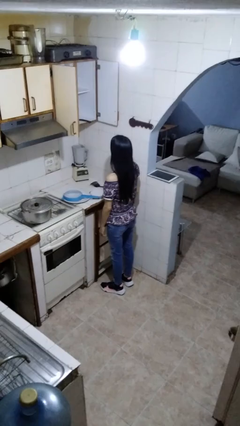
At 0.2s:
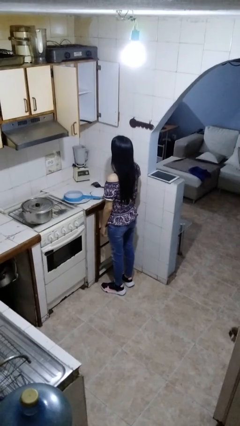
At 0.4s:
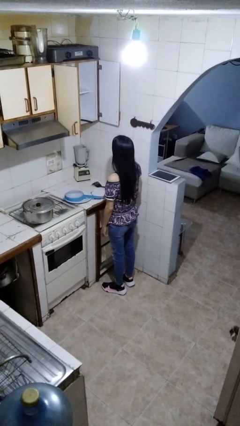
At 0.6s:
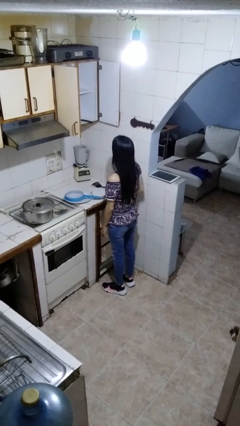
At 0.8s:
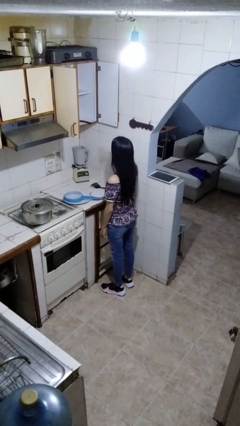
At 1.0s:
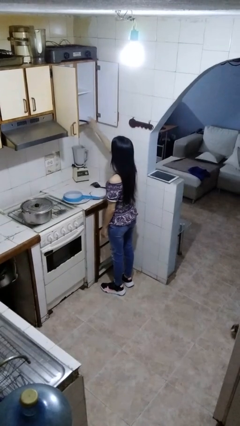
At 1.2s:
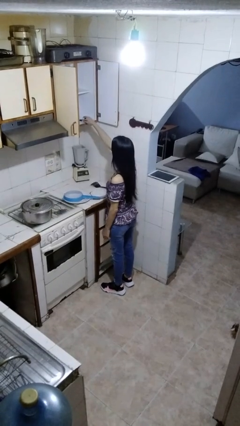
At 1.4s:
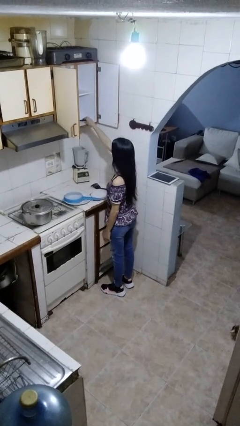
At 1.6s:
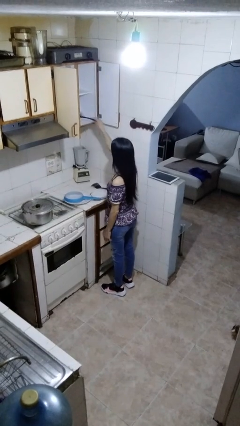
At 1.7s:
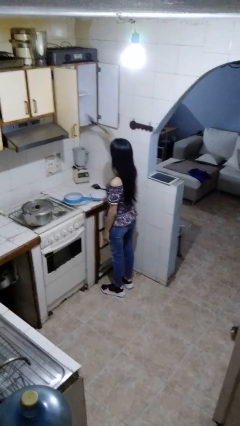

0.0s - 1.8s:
person takes object from cabinet

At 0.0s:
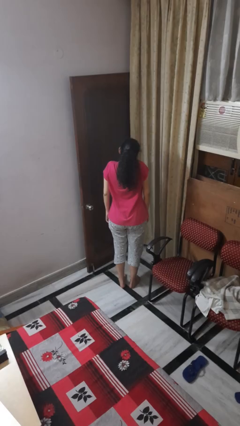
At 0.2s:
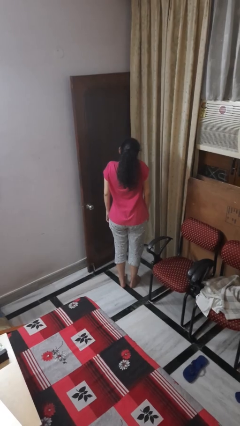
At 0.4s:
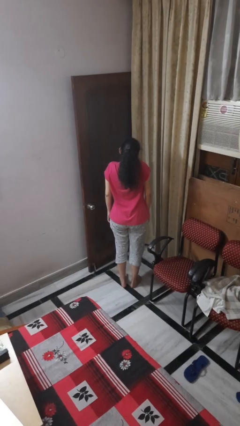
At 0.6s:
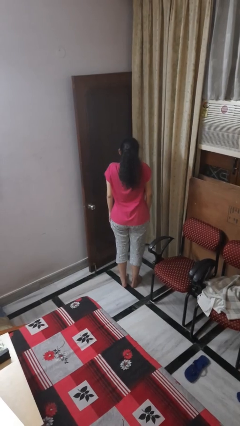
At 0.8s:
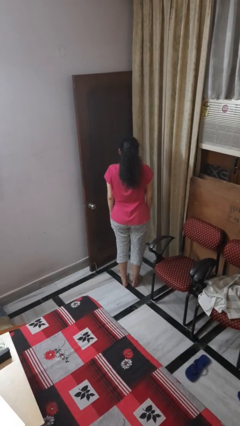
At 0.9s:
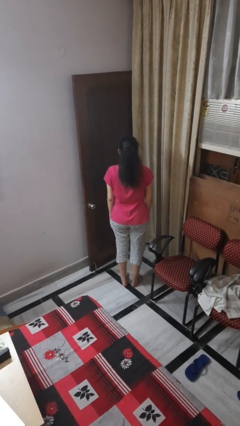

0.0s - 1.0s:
person shrugs

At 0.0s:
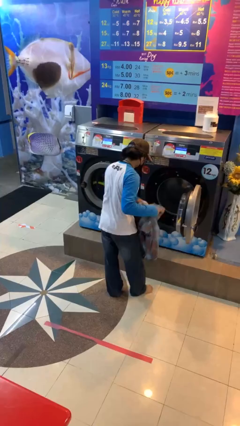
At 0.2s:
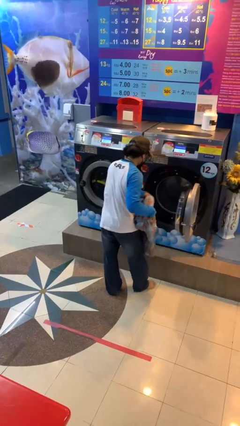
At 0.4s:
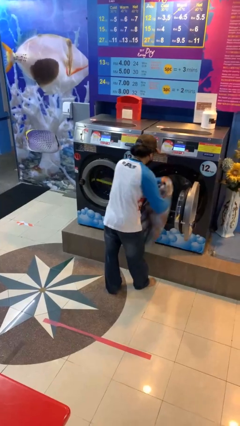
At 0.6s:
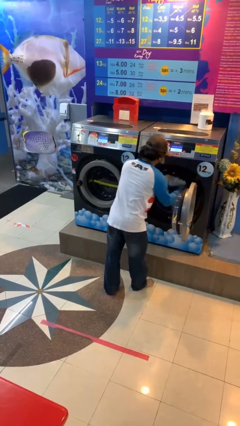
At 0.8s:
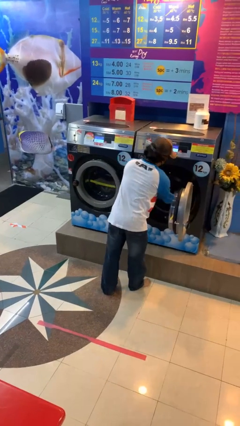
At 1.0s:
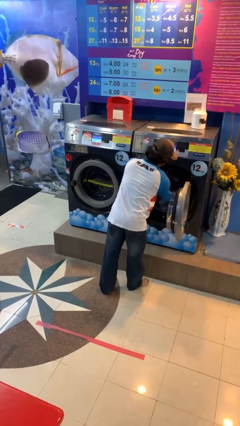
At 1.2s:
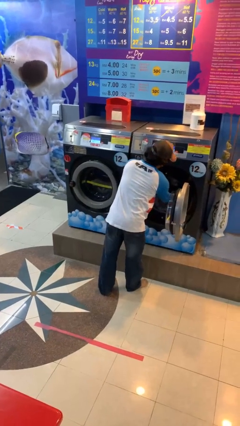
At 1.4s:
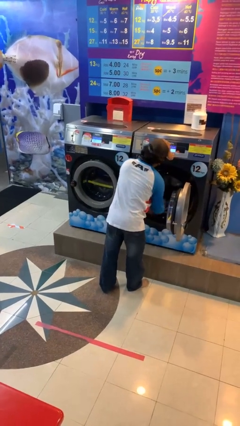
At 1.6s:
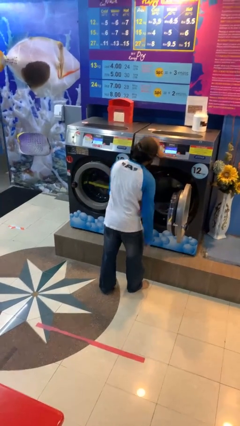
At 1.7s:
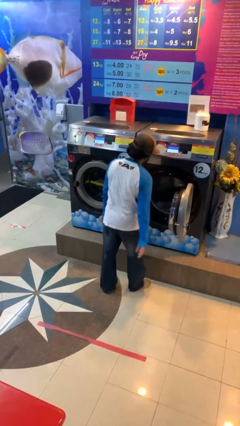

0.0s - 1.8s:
person loads clotheswasher

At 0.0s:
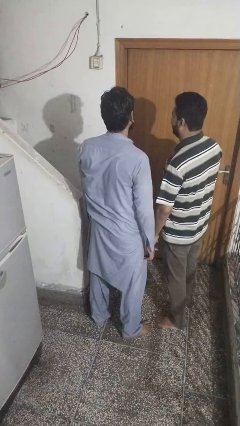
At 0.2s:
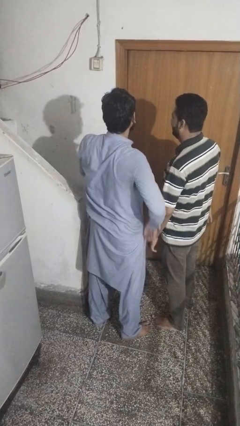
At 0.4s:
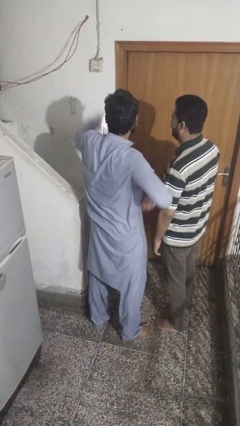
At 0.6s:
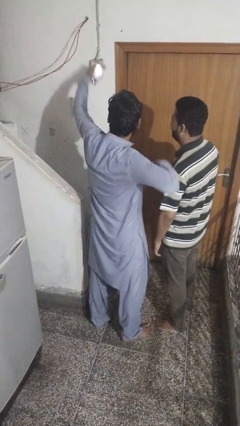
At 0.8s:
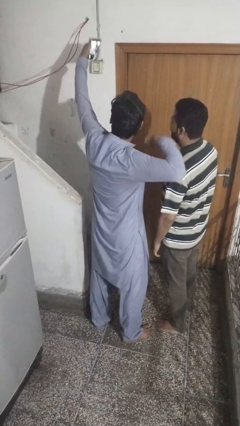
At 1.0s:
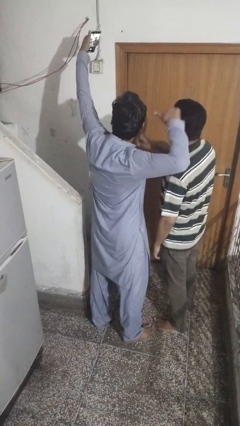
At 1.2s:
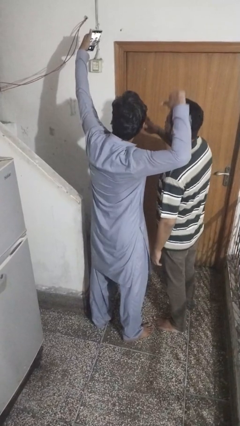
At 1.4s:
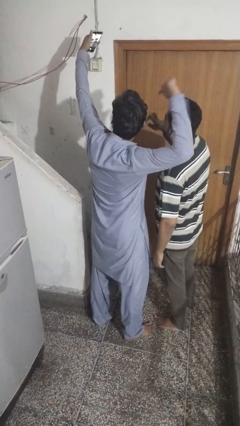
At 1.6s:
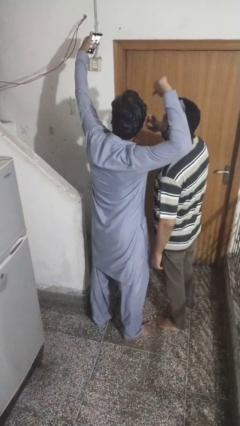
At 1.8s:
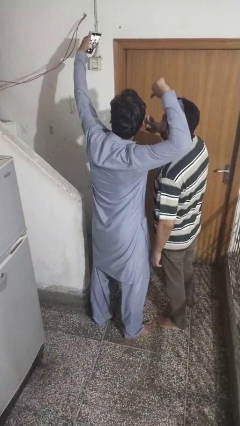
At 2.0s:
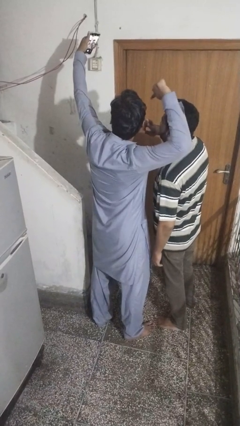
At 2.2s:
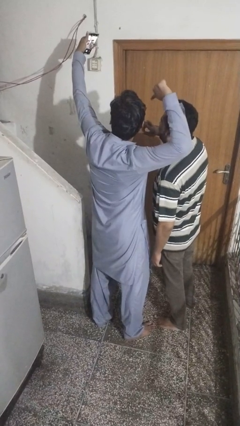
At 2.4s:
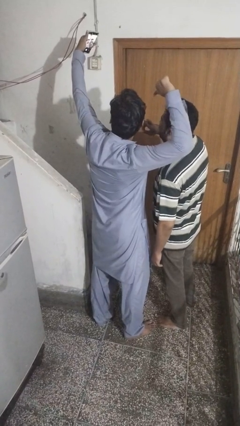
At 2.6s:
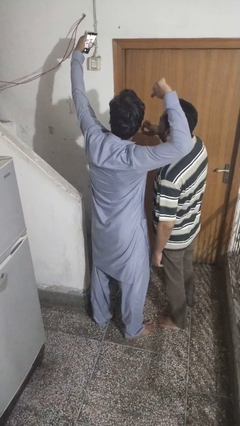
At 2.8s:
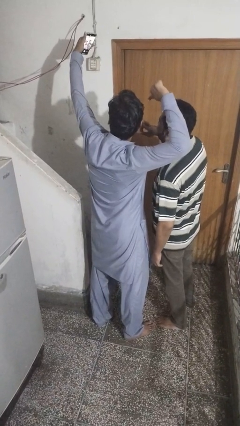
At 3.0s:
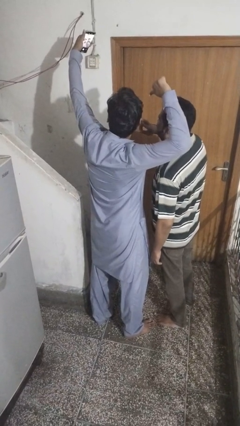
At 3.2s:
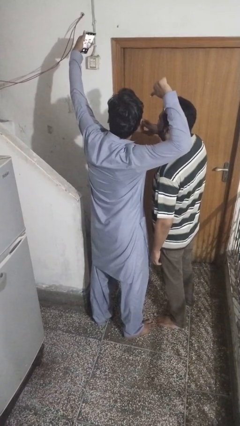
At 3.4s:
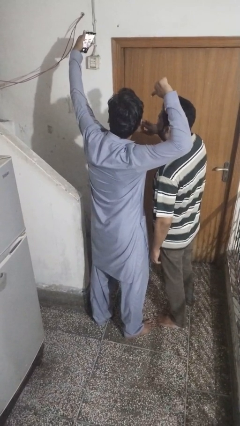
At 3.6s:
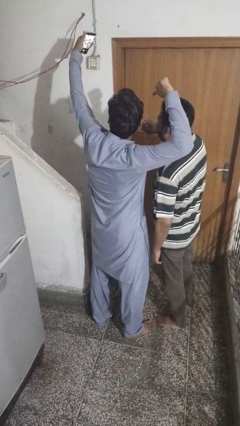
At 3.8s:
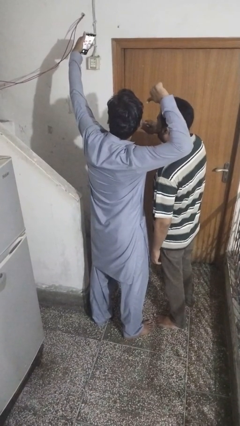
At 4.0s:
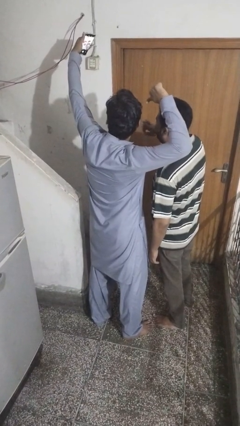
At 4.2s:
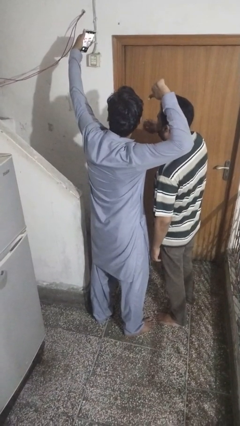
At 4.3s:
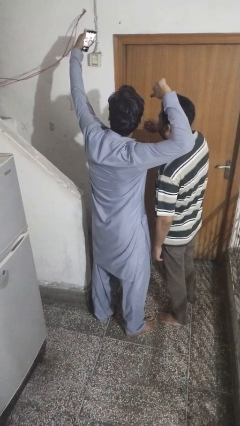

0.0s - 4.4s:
person takes selfie with person

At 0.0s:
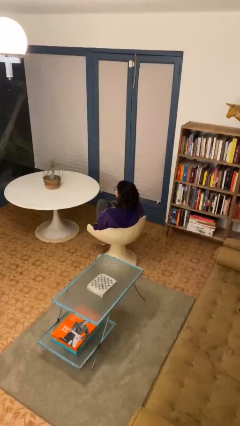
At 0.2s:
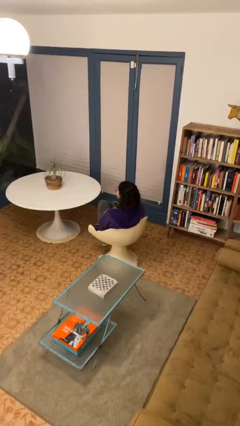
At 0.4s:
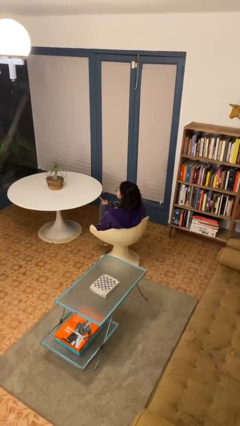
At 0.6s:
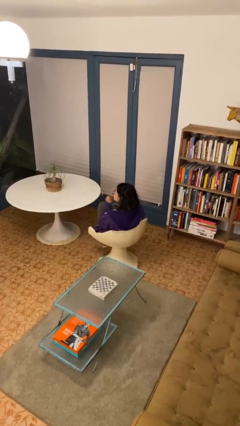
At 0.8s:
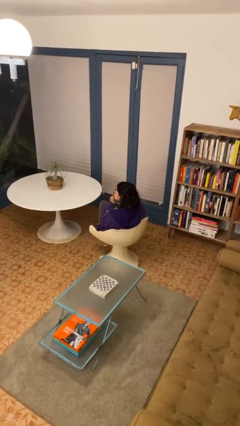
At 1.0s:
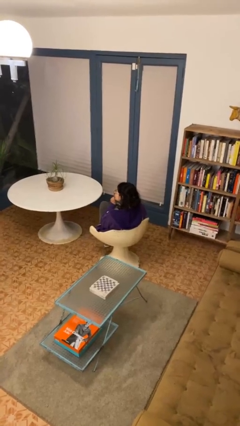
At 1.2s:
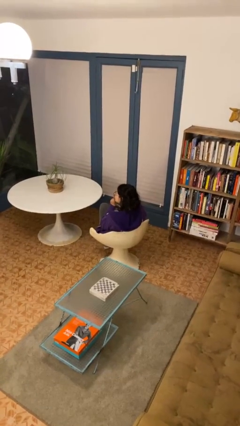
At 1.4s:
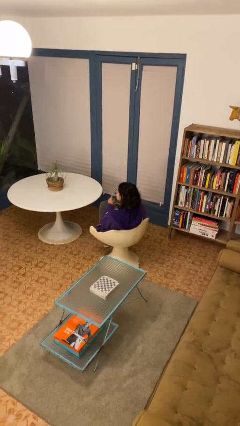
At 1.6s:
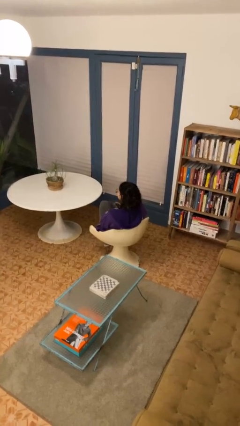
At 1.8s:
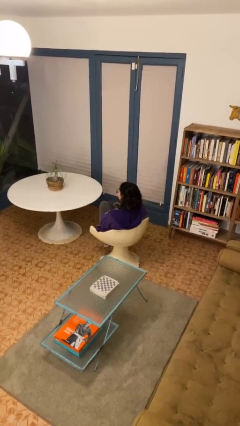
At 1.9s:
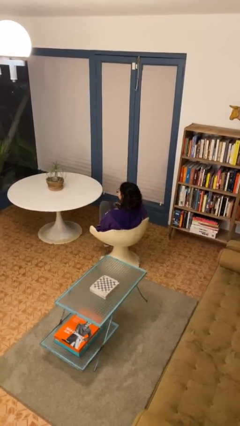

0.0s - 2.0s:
person gestures be quiet

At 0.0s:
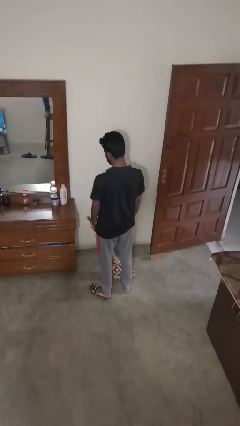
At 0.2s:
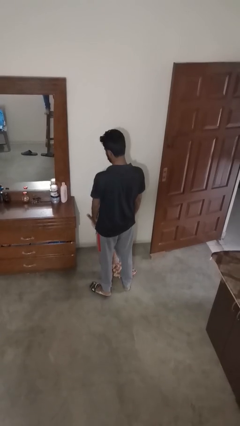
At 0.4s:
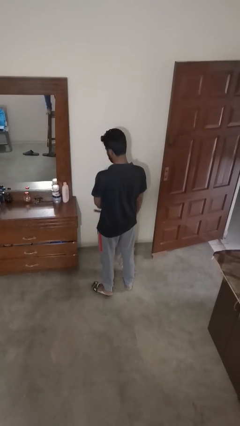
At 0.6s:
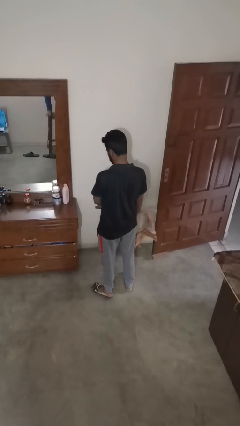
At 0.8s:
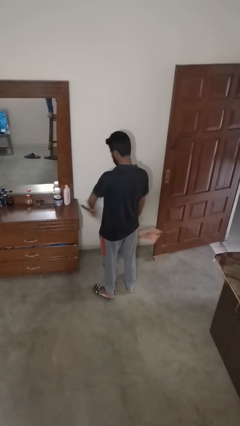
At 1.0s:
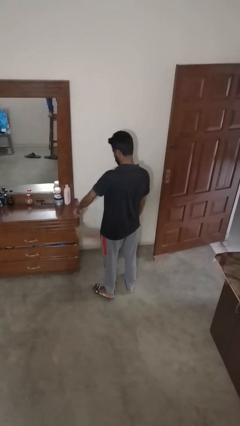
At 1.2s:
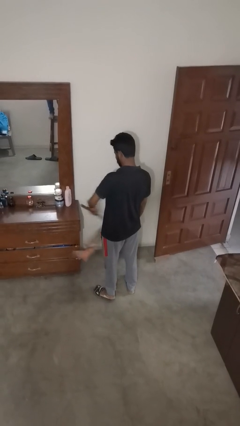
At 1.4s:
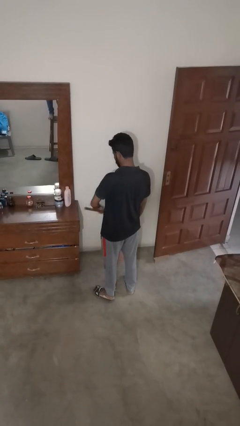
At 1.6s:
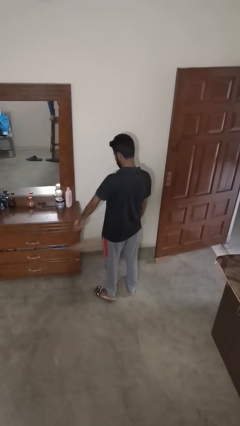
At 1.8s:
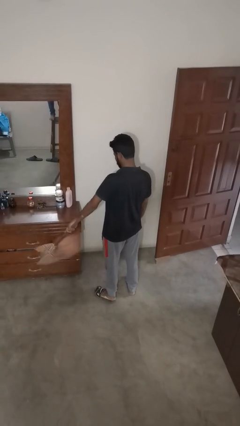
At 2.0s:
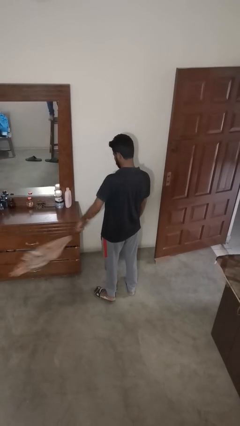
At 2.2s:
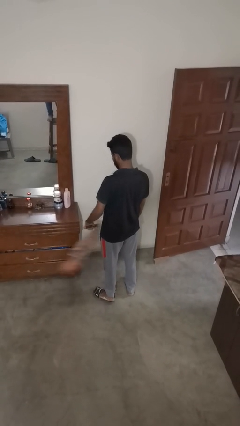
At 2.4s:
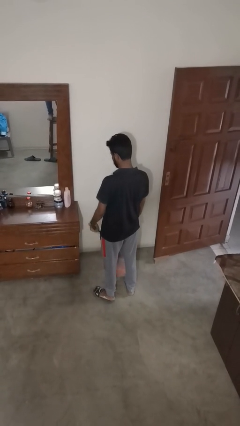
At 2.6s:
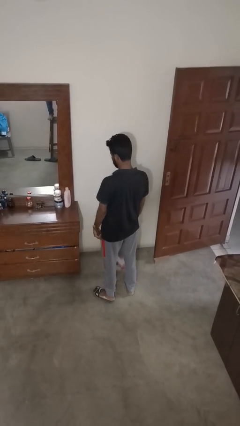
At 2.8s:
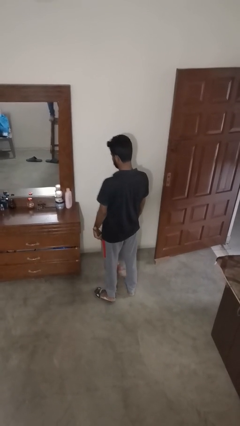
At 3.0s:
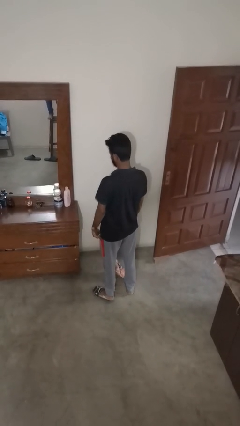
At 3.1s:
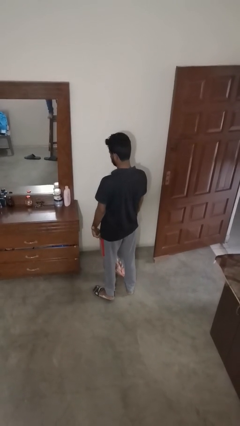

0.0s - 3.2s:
person dusts furniture

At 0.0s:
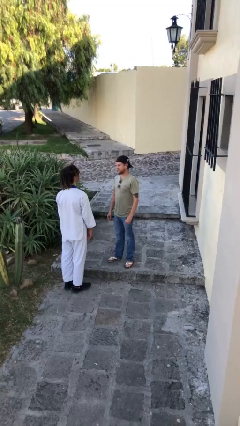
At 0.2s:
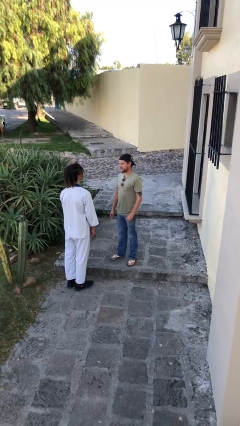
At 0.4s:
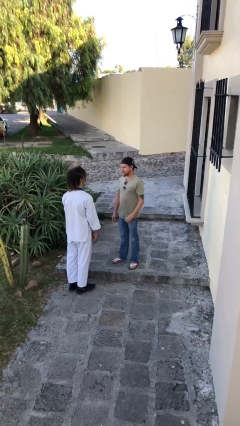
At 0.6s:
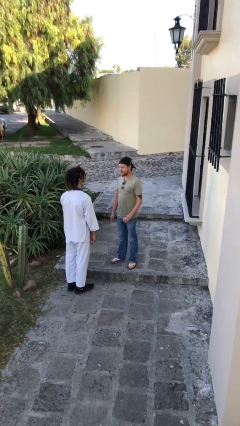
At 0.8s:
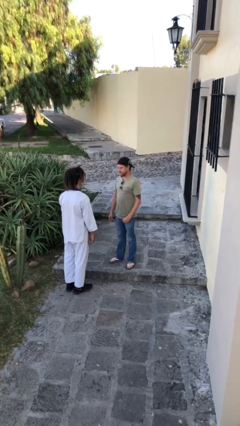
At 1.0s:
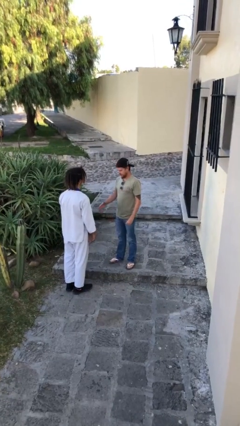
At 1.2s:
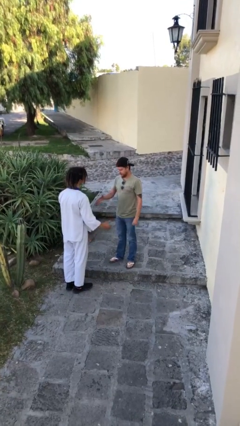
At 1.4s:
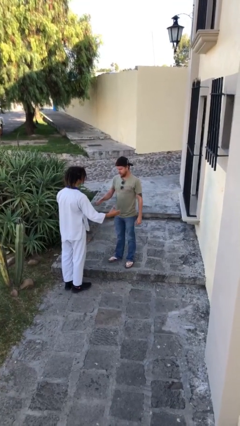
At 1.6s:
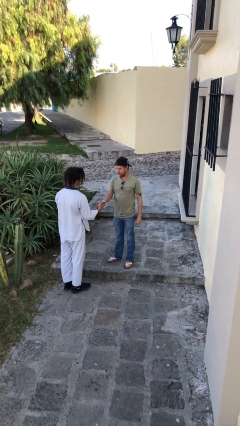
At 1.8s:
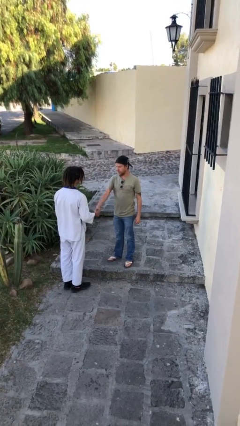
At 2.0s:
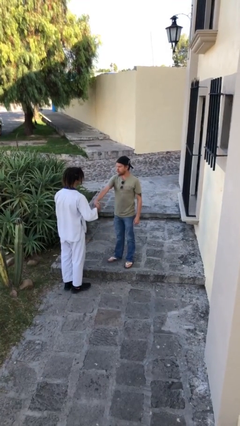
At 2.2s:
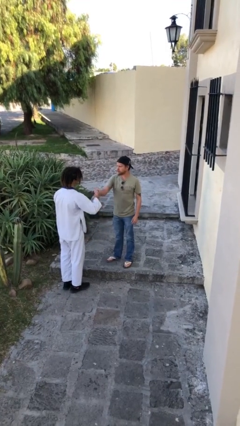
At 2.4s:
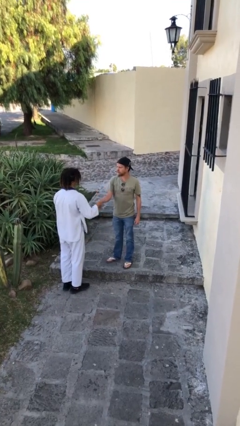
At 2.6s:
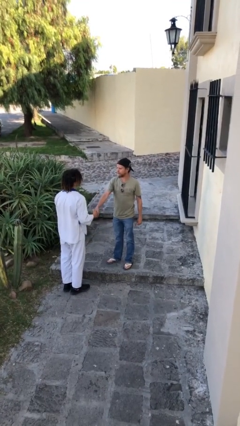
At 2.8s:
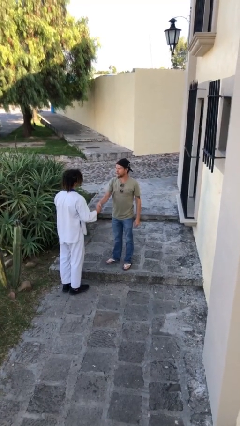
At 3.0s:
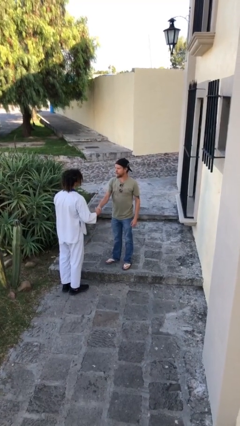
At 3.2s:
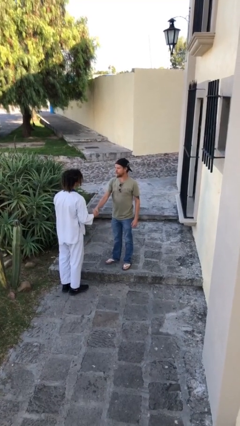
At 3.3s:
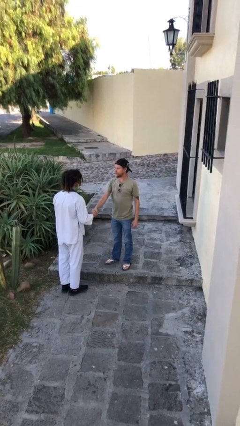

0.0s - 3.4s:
person shakes hand
